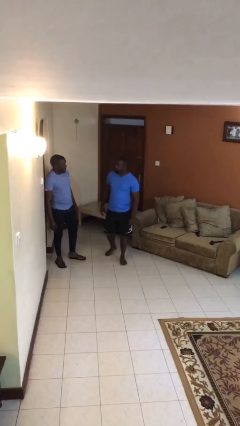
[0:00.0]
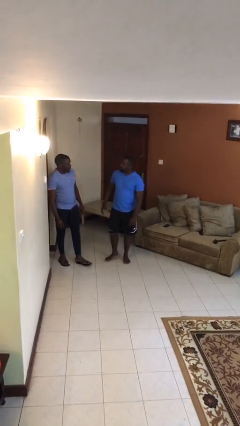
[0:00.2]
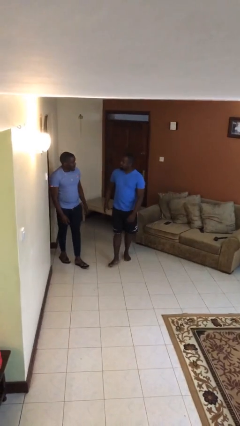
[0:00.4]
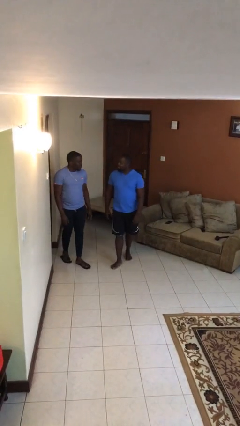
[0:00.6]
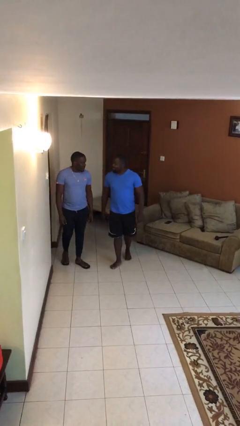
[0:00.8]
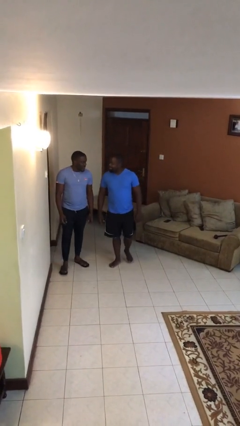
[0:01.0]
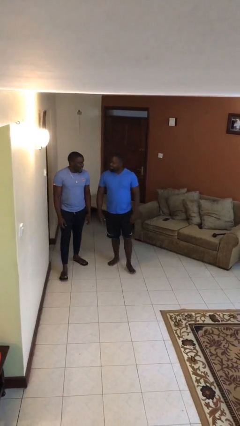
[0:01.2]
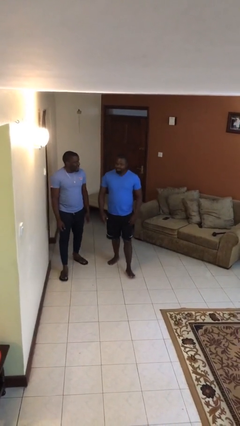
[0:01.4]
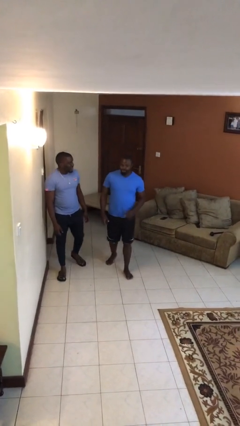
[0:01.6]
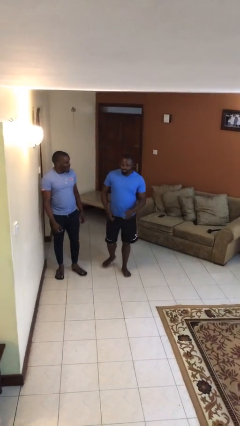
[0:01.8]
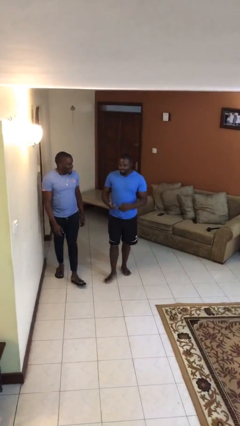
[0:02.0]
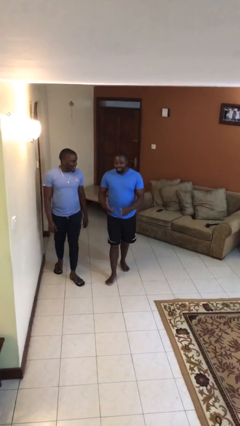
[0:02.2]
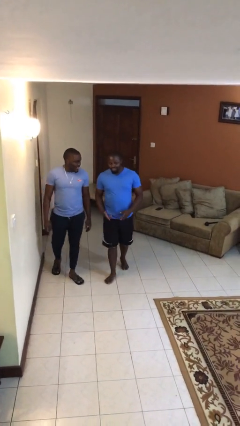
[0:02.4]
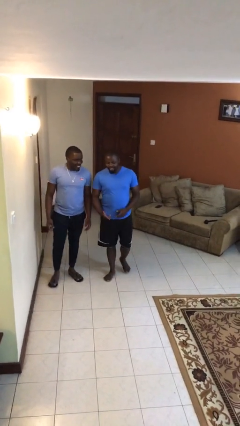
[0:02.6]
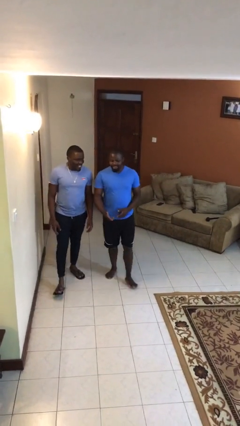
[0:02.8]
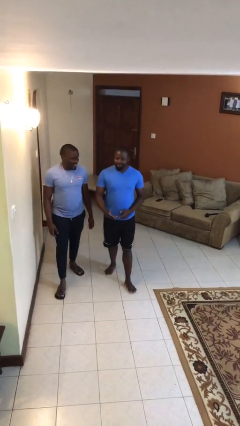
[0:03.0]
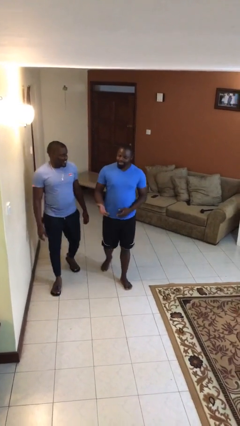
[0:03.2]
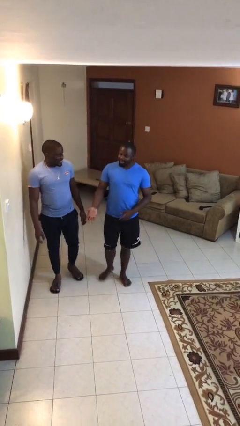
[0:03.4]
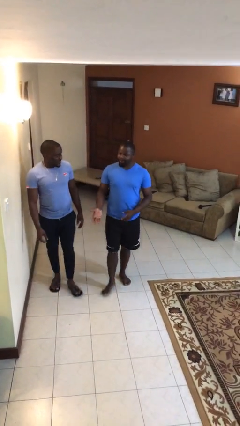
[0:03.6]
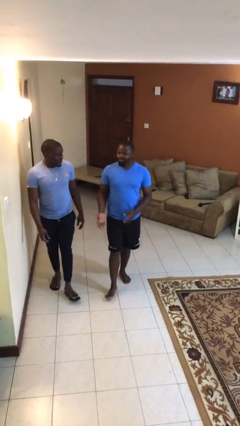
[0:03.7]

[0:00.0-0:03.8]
person talks to person

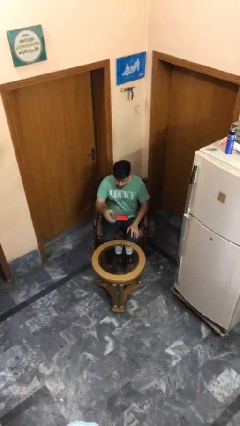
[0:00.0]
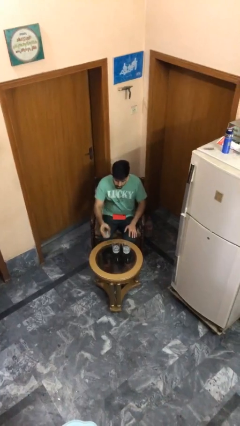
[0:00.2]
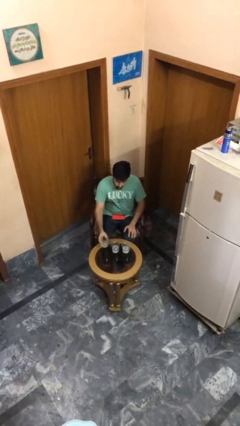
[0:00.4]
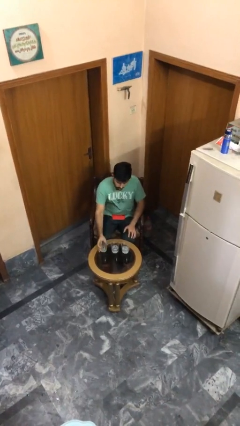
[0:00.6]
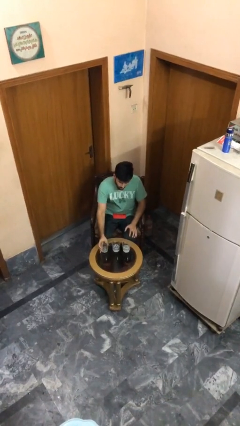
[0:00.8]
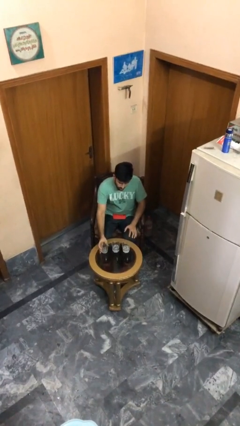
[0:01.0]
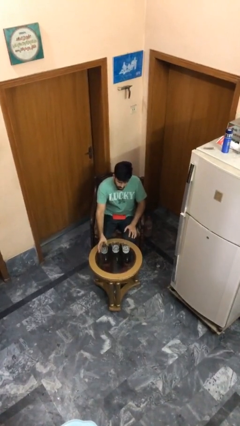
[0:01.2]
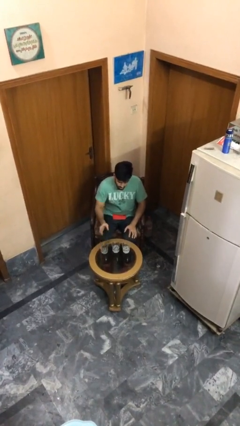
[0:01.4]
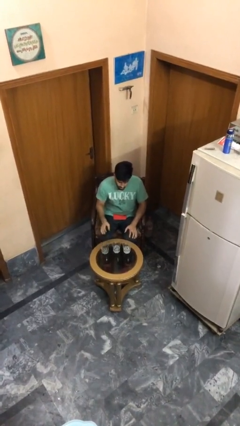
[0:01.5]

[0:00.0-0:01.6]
person puts down object on table

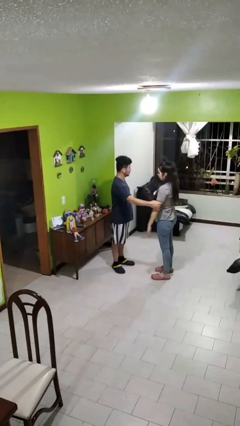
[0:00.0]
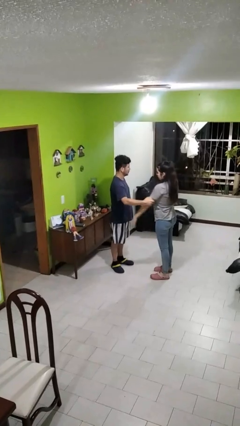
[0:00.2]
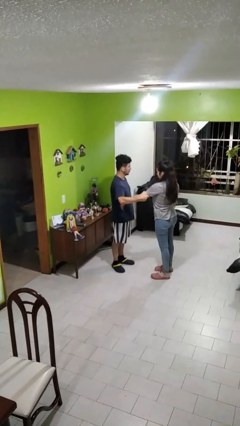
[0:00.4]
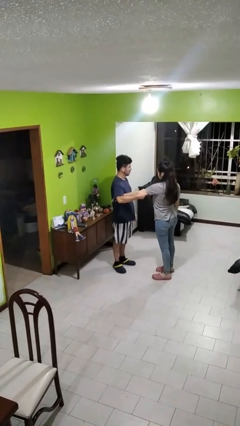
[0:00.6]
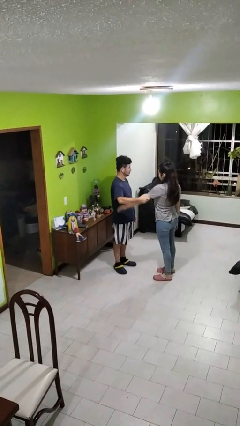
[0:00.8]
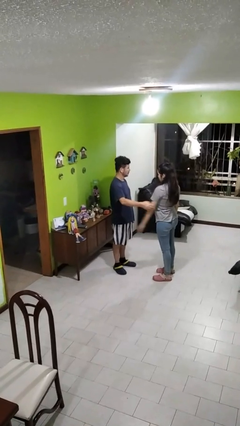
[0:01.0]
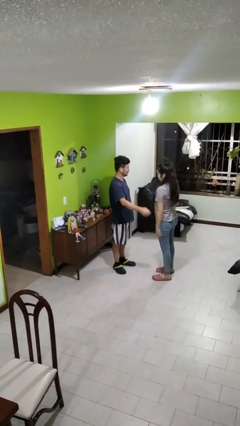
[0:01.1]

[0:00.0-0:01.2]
person grabs person by bicep

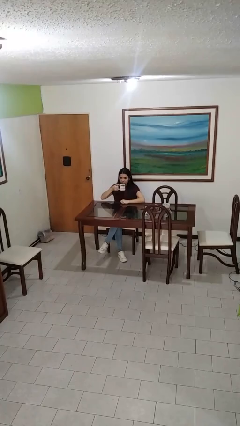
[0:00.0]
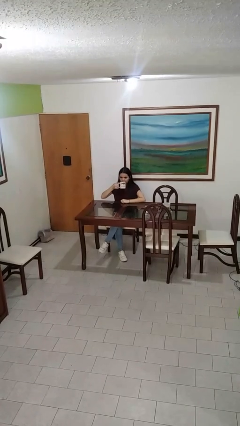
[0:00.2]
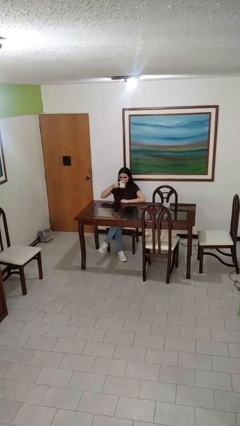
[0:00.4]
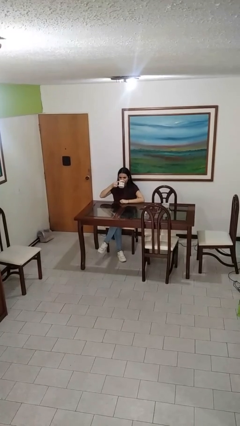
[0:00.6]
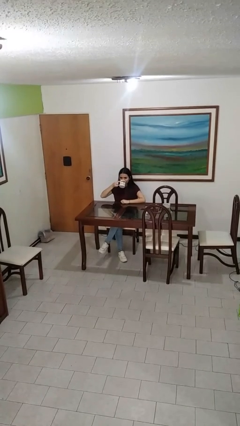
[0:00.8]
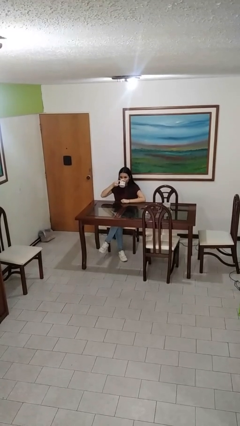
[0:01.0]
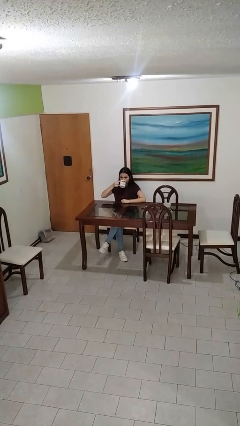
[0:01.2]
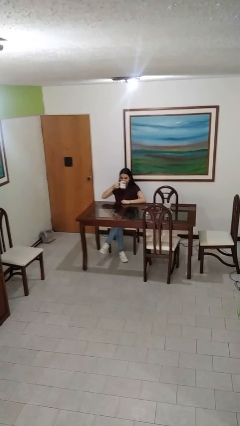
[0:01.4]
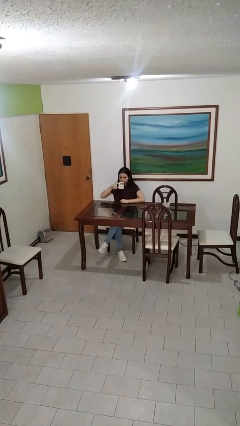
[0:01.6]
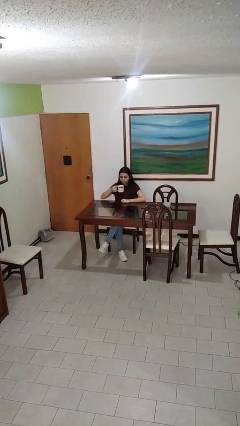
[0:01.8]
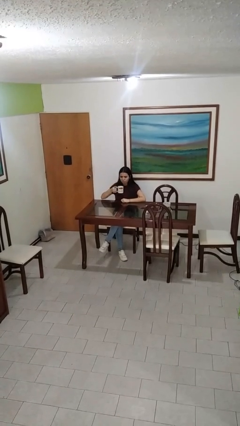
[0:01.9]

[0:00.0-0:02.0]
person drinks from mug

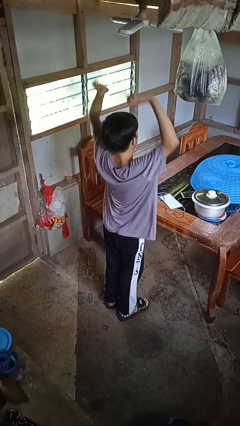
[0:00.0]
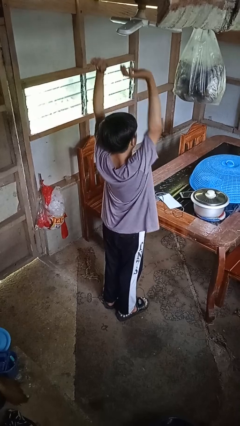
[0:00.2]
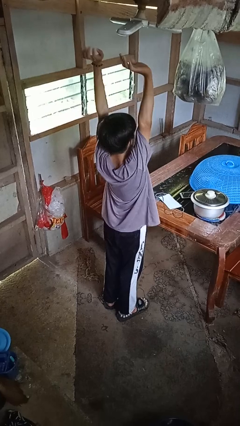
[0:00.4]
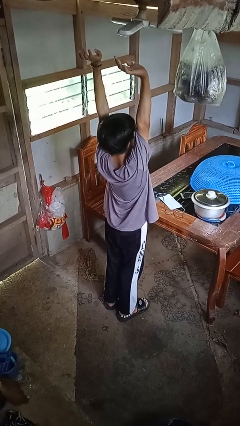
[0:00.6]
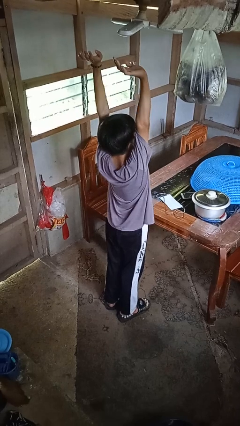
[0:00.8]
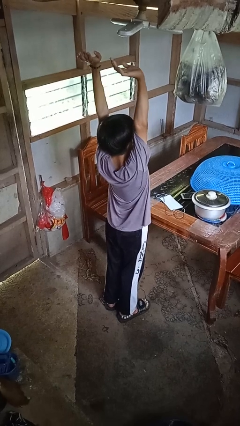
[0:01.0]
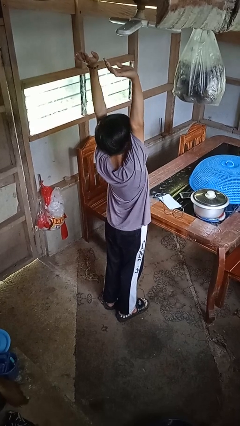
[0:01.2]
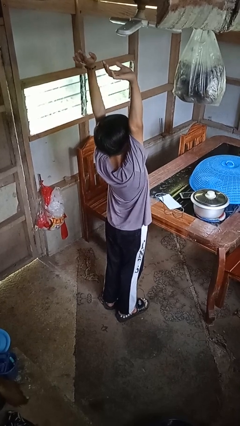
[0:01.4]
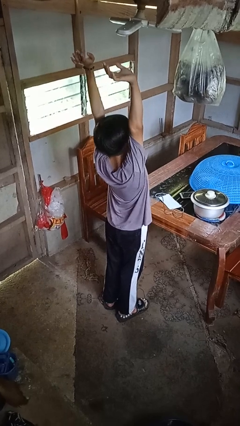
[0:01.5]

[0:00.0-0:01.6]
person stretches arms over head

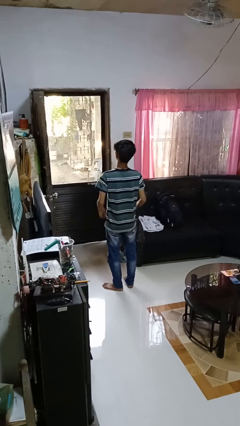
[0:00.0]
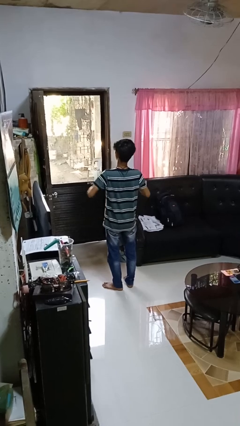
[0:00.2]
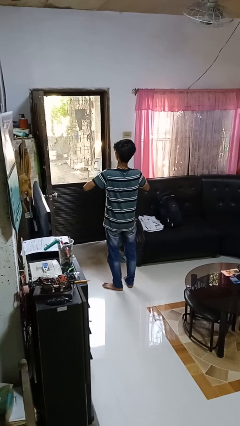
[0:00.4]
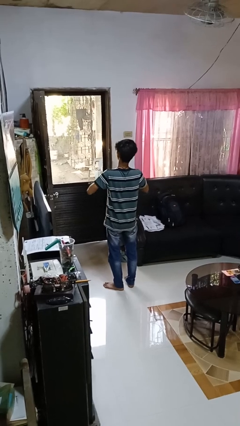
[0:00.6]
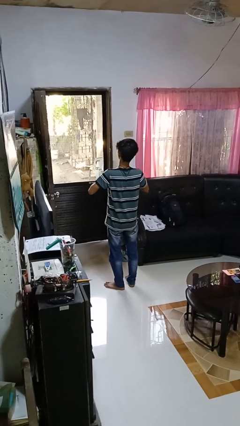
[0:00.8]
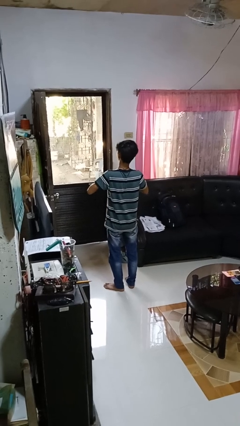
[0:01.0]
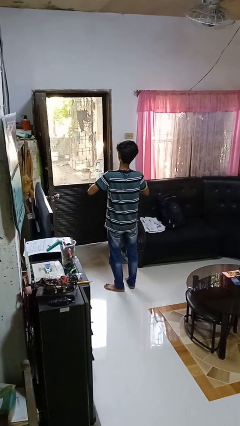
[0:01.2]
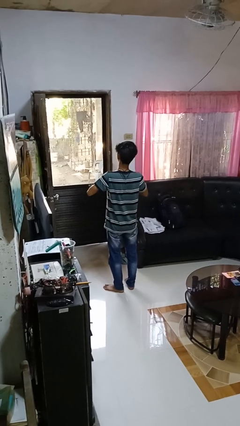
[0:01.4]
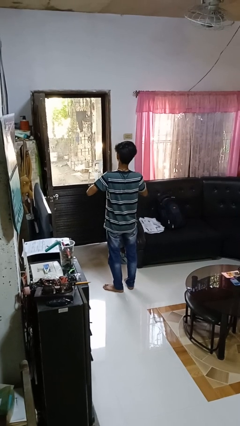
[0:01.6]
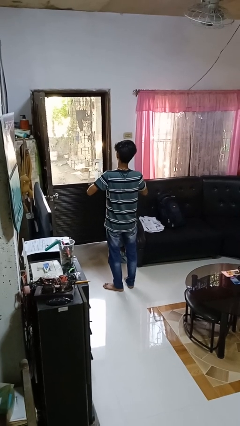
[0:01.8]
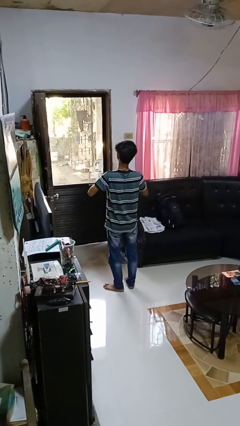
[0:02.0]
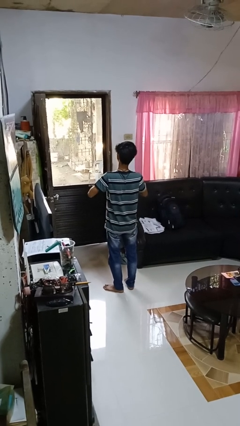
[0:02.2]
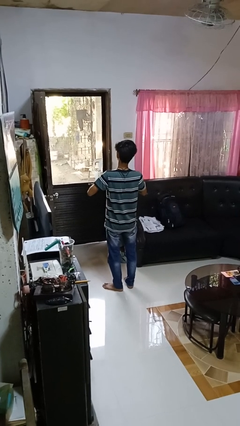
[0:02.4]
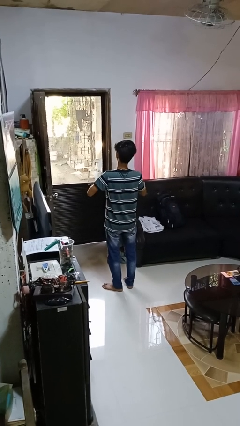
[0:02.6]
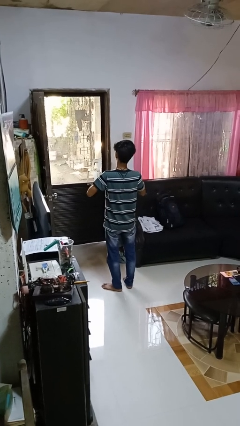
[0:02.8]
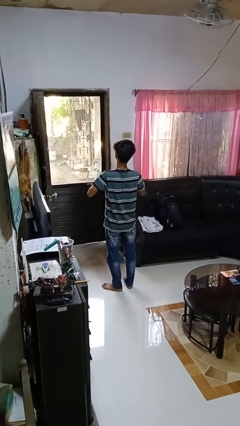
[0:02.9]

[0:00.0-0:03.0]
person buttons shirt

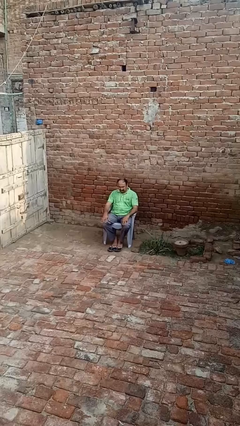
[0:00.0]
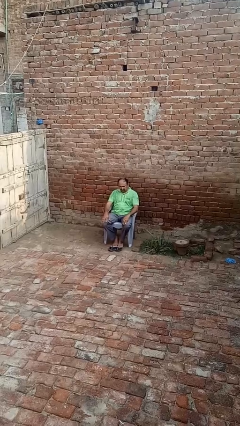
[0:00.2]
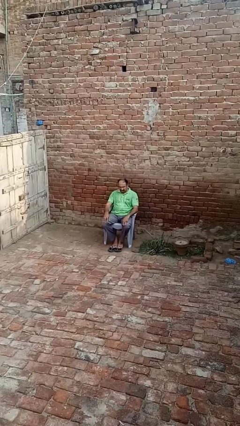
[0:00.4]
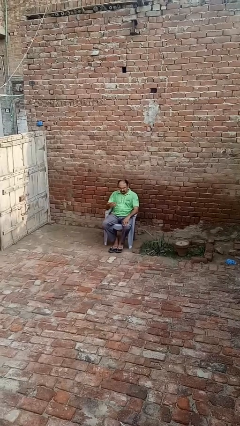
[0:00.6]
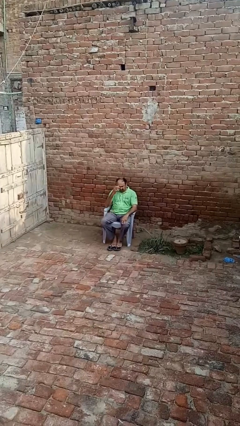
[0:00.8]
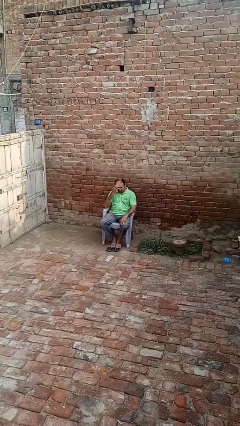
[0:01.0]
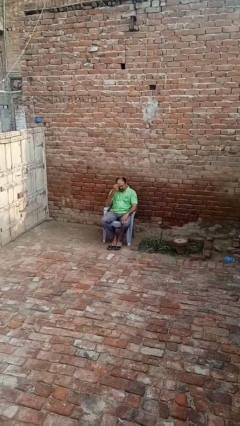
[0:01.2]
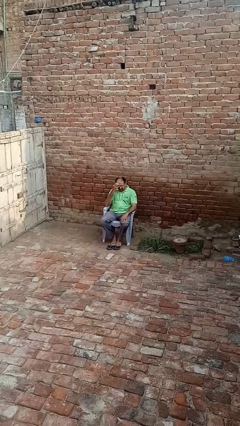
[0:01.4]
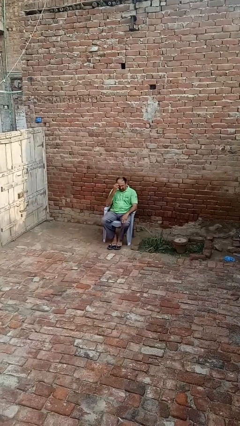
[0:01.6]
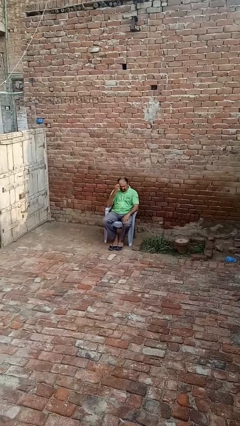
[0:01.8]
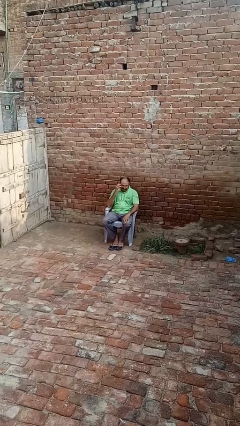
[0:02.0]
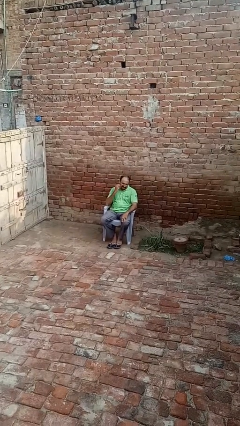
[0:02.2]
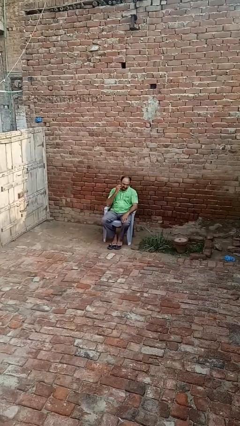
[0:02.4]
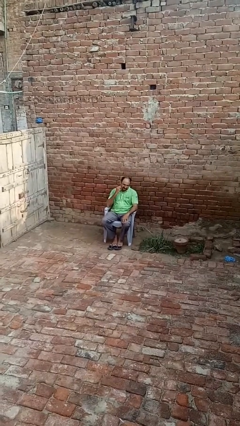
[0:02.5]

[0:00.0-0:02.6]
person scratches face

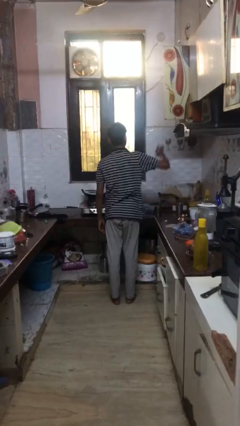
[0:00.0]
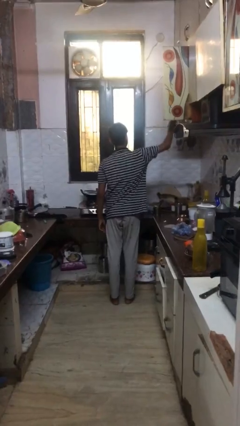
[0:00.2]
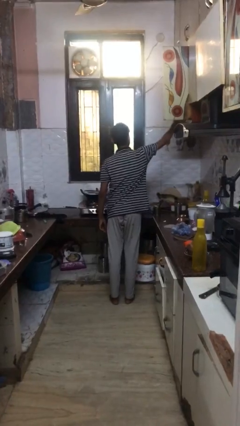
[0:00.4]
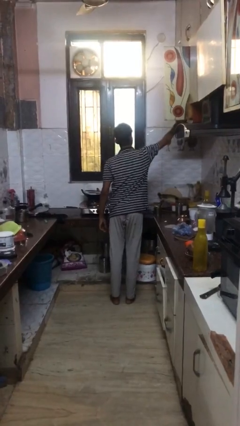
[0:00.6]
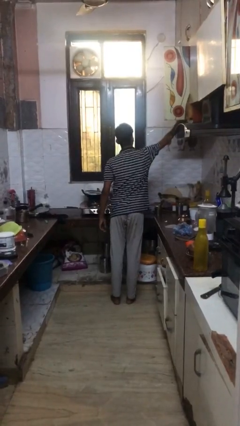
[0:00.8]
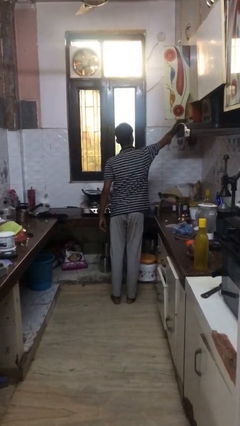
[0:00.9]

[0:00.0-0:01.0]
person takes object from cabinet
